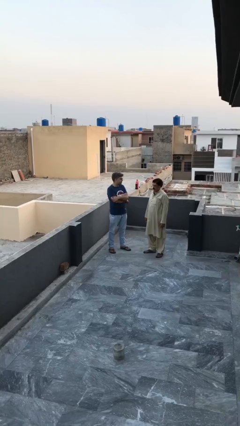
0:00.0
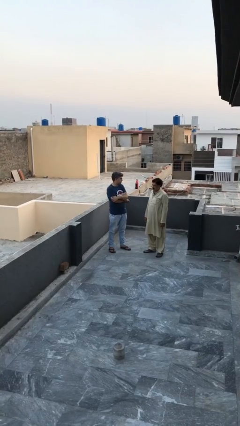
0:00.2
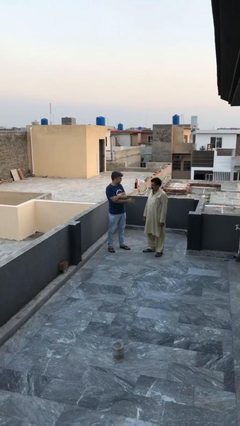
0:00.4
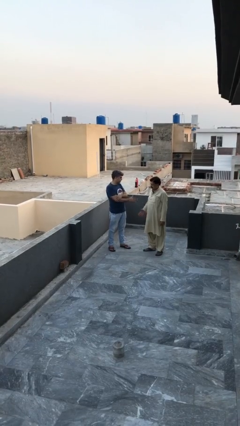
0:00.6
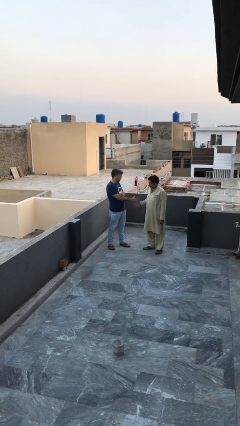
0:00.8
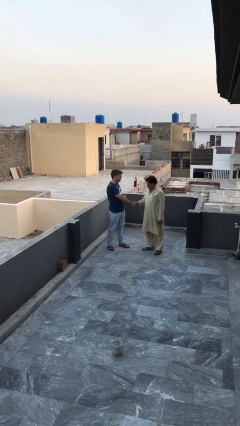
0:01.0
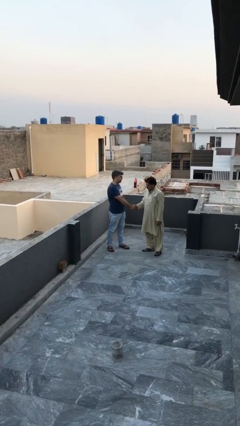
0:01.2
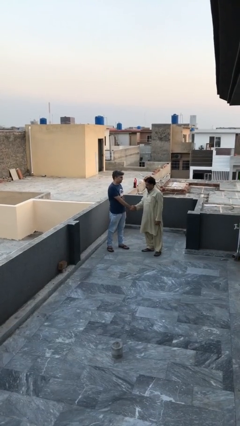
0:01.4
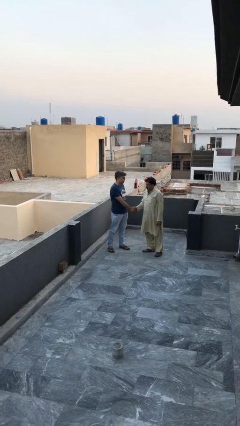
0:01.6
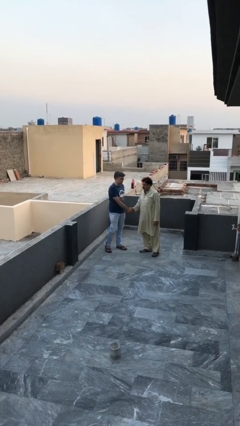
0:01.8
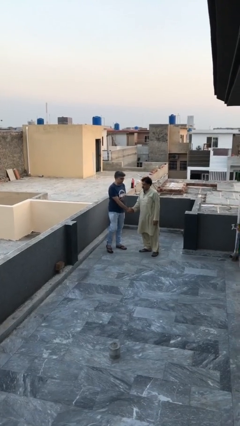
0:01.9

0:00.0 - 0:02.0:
person shakes hand

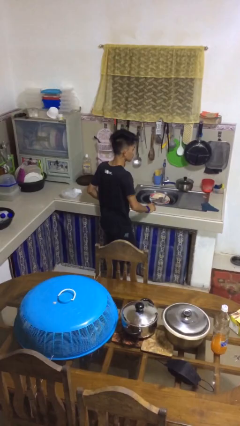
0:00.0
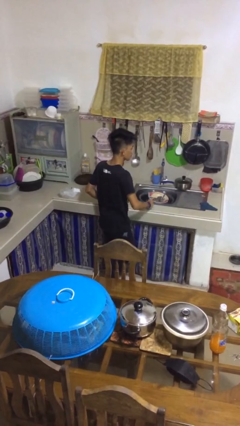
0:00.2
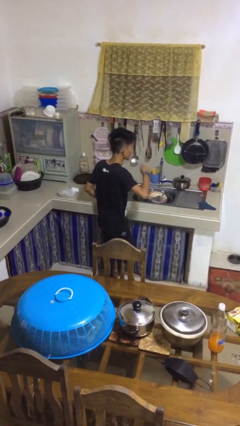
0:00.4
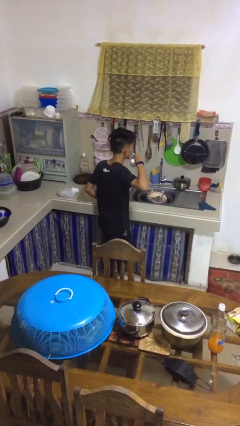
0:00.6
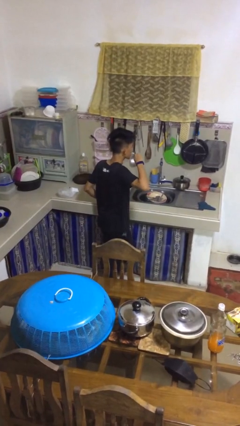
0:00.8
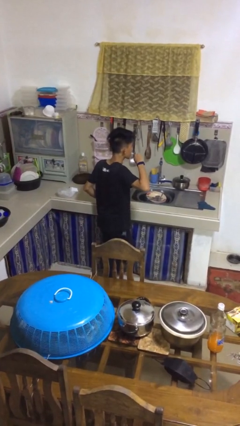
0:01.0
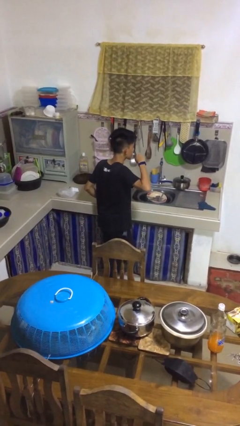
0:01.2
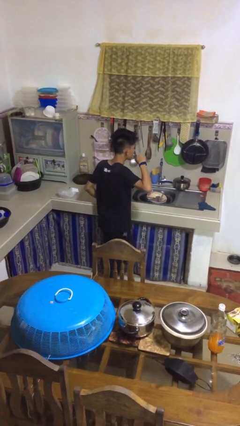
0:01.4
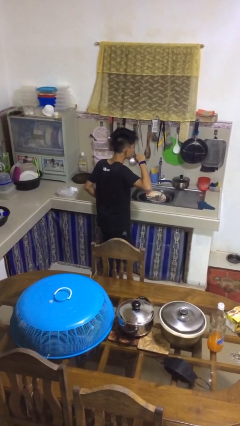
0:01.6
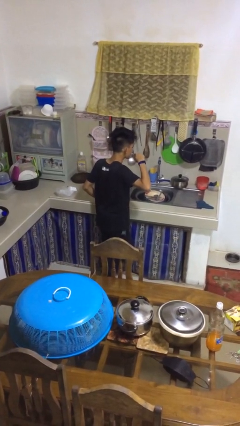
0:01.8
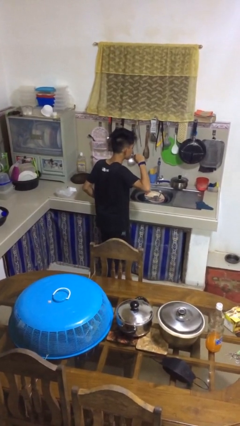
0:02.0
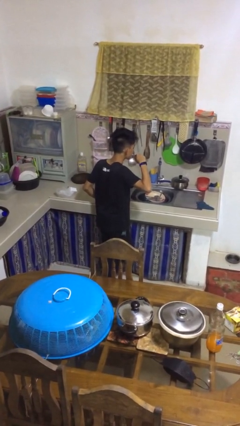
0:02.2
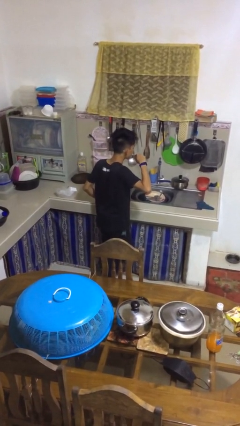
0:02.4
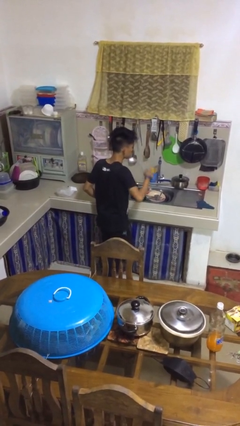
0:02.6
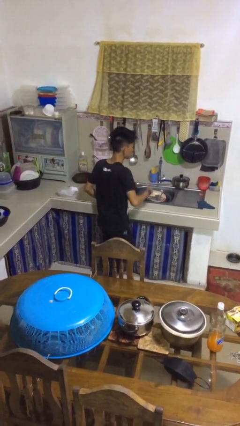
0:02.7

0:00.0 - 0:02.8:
person brushes teeth

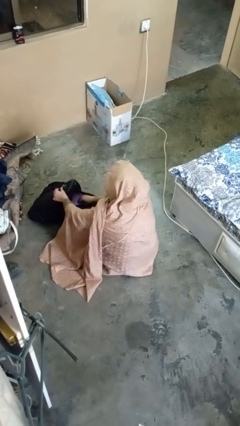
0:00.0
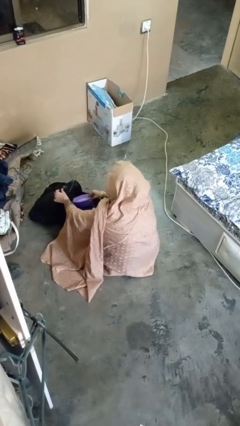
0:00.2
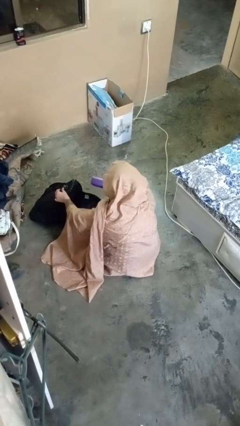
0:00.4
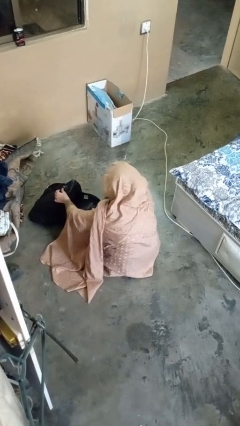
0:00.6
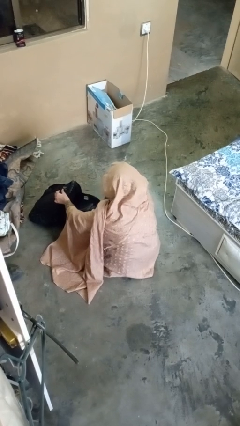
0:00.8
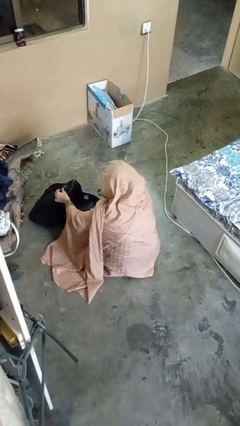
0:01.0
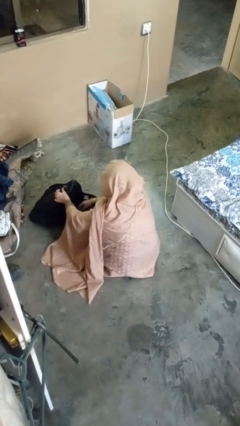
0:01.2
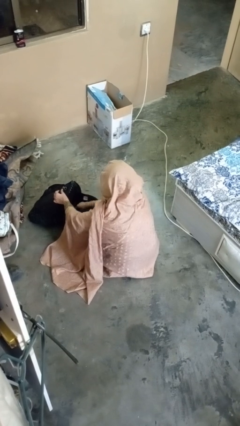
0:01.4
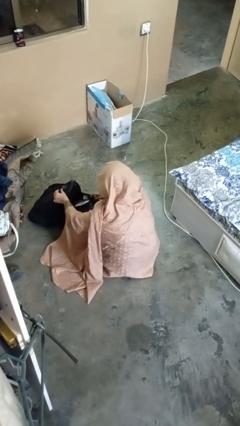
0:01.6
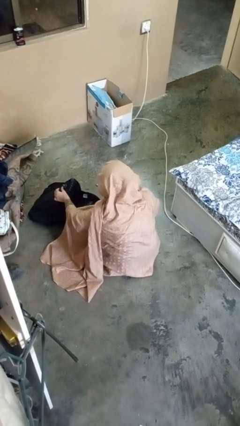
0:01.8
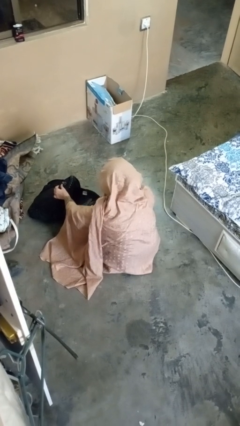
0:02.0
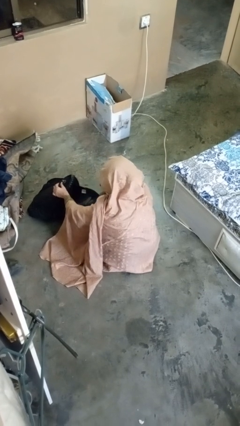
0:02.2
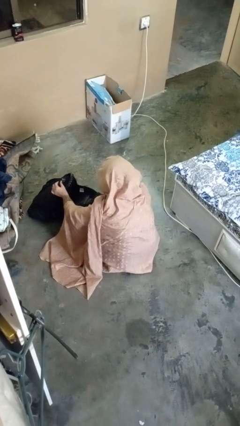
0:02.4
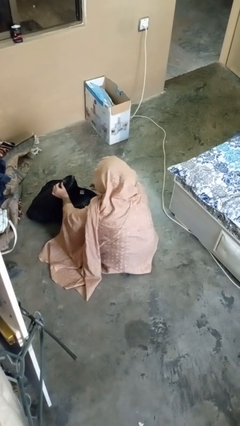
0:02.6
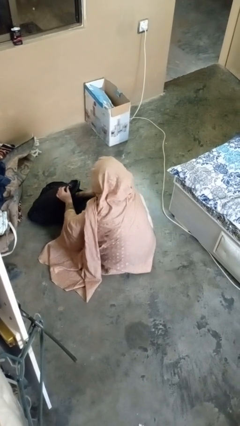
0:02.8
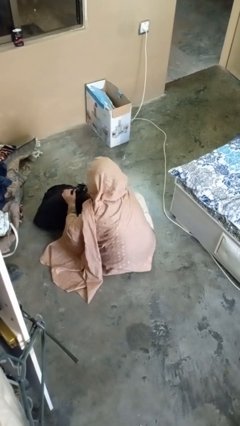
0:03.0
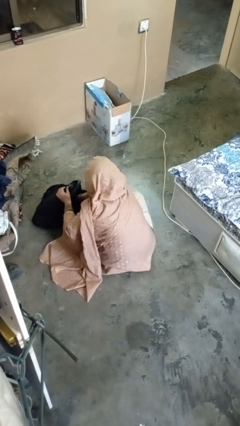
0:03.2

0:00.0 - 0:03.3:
person takes object from backpack

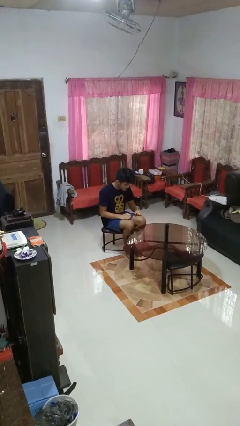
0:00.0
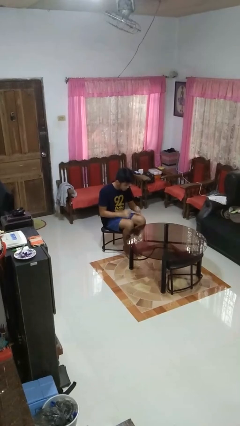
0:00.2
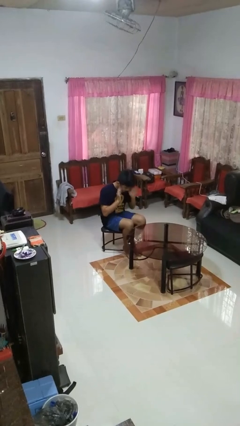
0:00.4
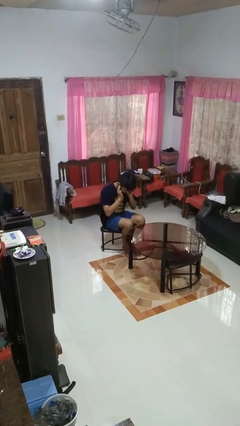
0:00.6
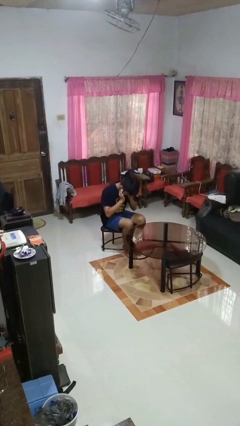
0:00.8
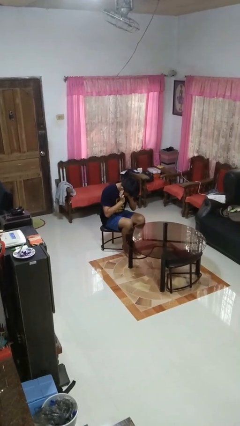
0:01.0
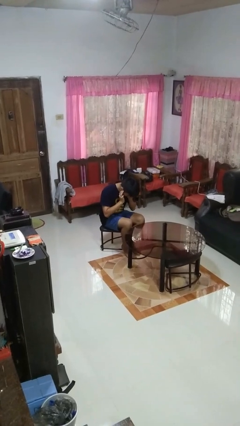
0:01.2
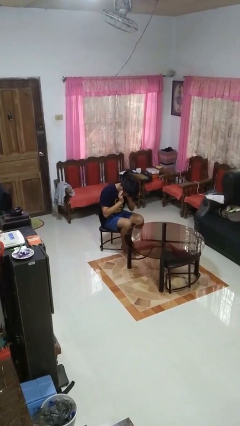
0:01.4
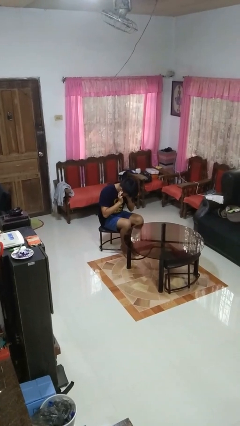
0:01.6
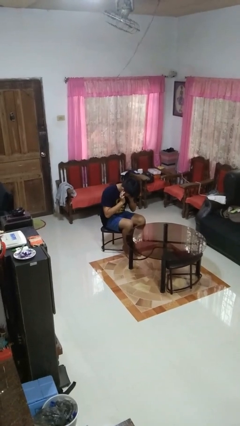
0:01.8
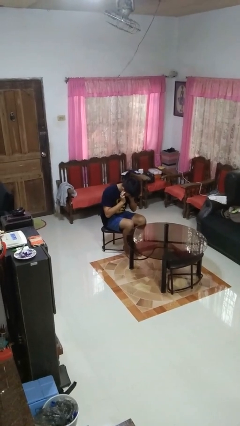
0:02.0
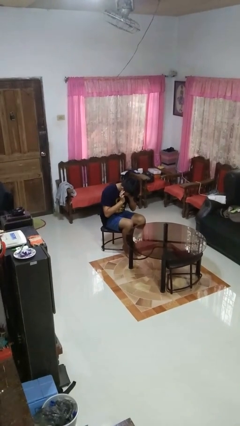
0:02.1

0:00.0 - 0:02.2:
person puts fingers in ear

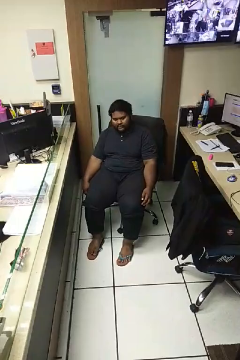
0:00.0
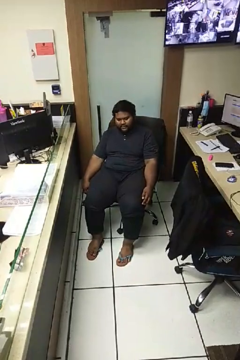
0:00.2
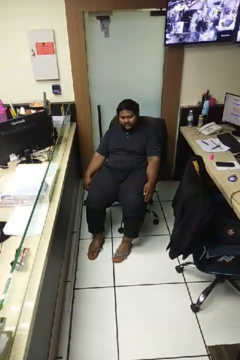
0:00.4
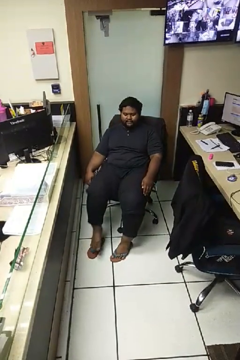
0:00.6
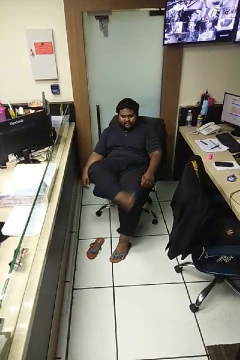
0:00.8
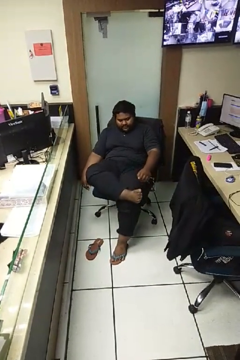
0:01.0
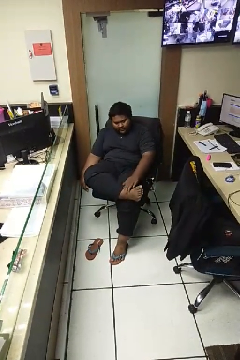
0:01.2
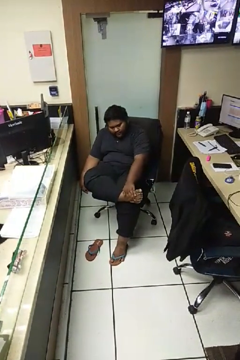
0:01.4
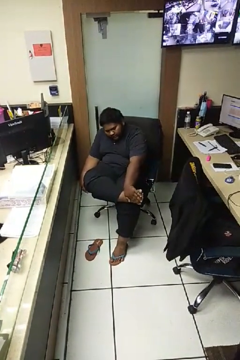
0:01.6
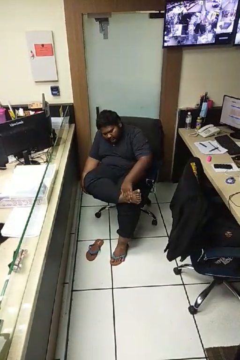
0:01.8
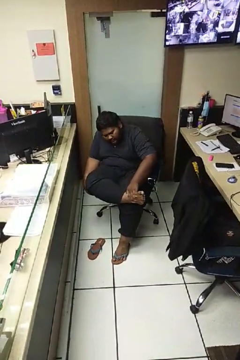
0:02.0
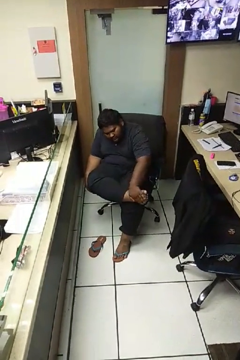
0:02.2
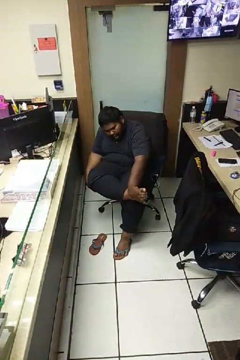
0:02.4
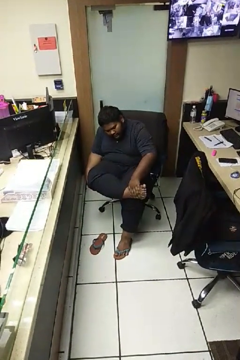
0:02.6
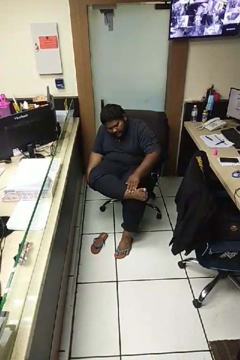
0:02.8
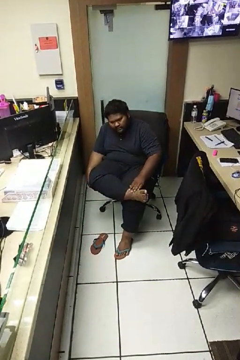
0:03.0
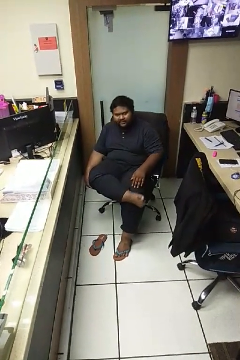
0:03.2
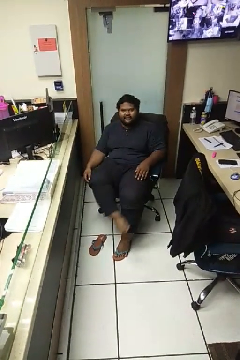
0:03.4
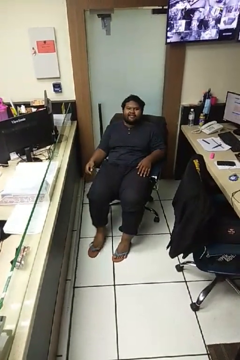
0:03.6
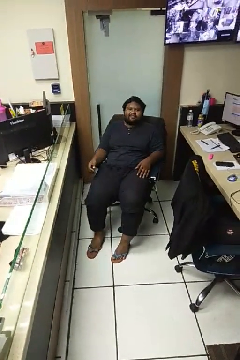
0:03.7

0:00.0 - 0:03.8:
person rubs foot

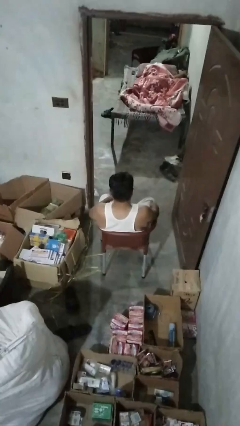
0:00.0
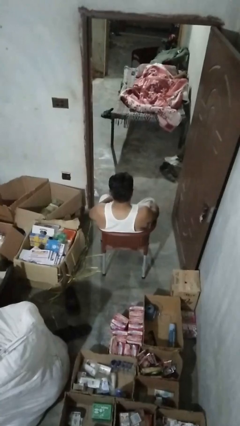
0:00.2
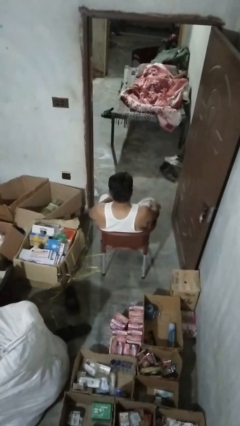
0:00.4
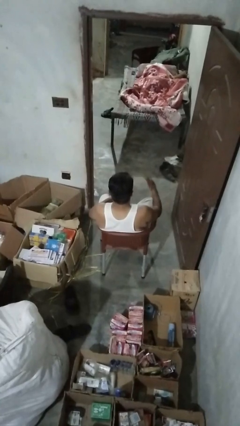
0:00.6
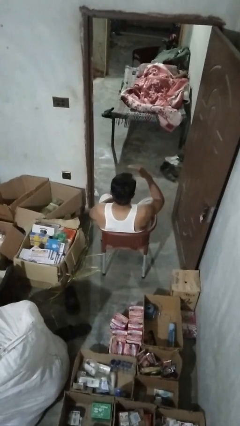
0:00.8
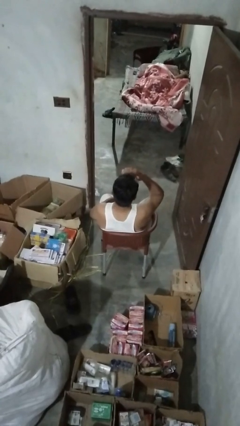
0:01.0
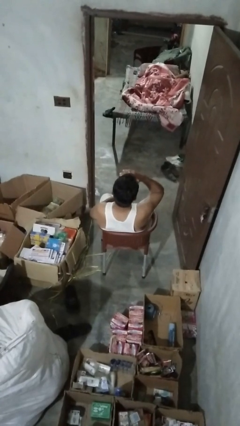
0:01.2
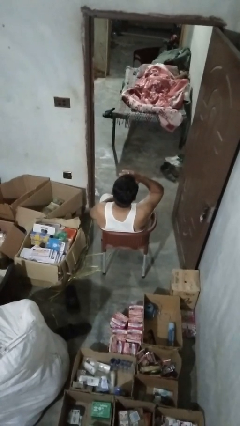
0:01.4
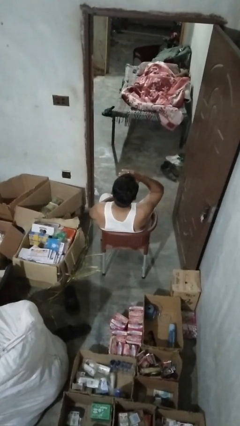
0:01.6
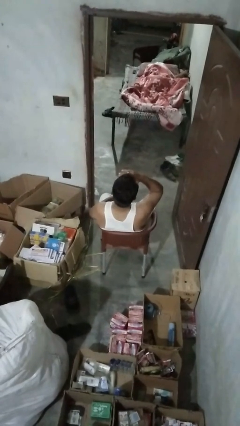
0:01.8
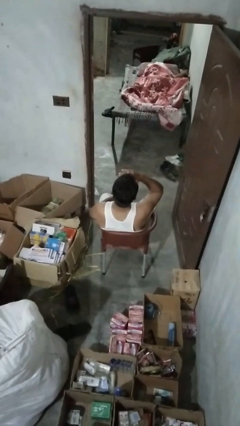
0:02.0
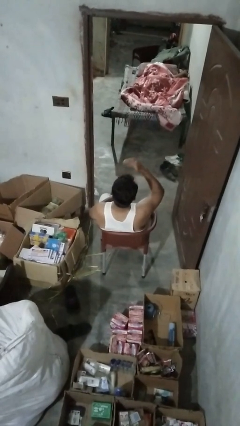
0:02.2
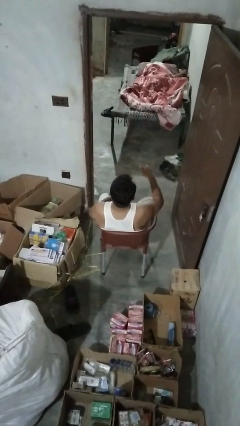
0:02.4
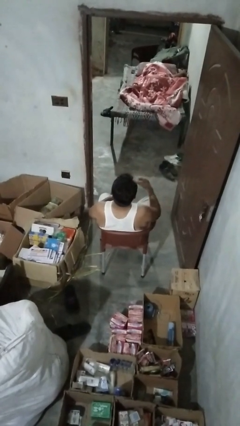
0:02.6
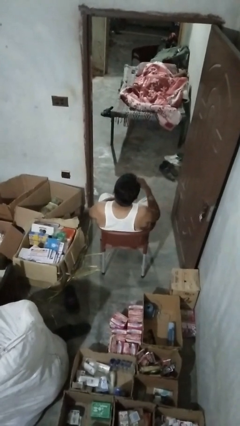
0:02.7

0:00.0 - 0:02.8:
person shades eyes

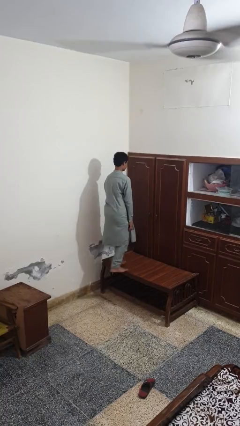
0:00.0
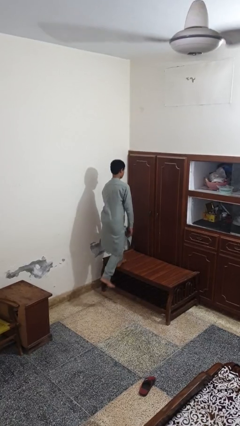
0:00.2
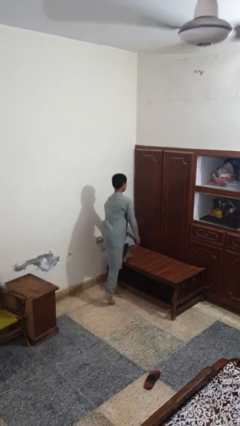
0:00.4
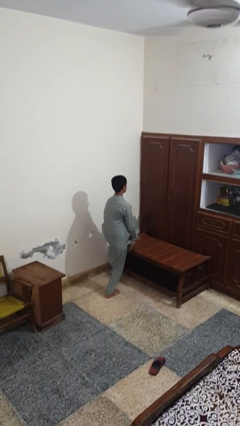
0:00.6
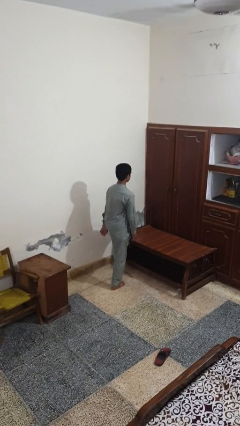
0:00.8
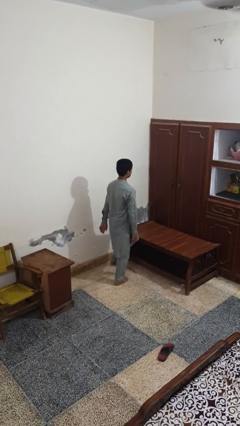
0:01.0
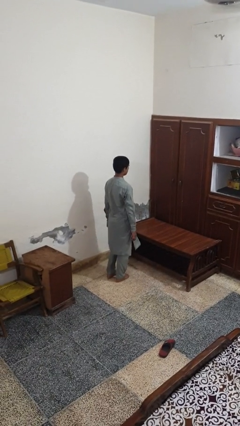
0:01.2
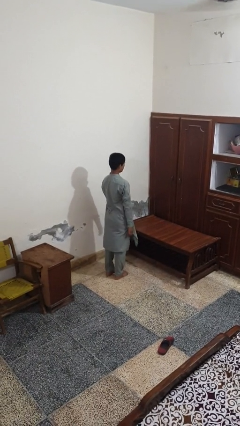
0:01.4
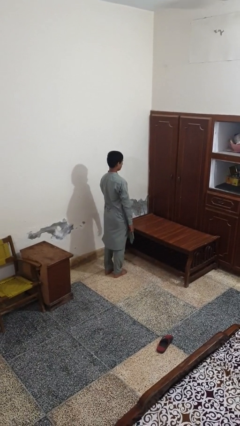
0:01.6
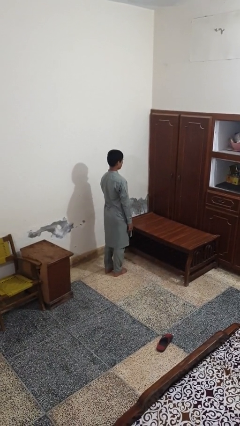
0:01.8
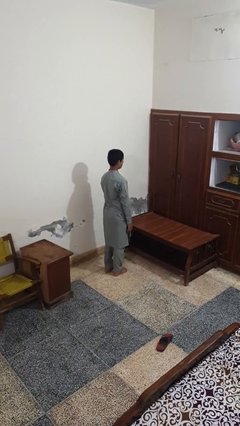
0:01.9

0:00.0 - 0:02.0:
person climbs off table
